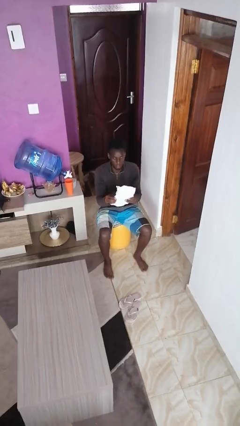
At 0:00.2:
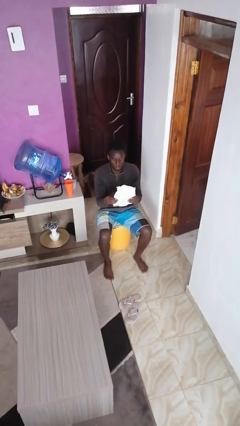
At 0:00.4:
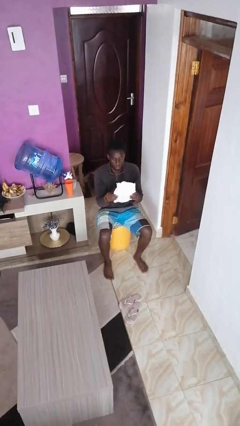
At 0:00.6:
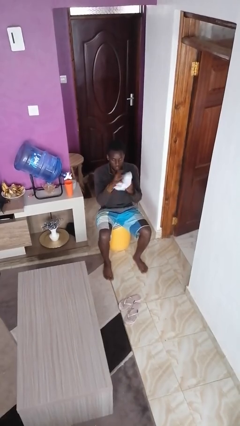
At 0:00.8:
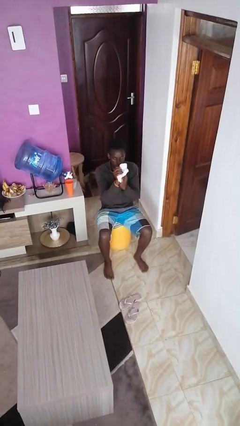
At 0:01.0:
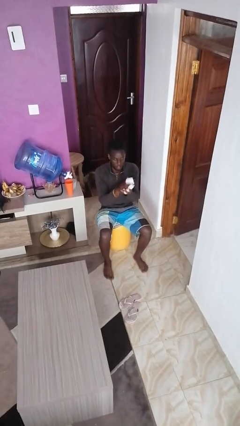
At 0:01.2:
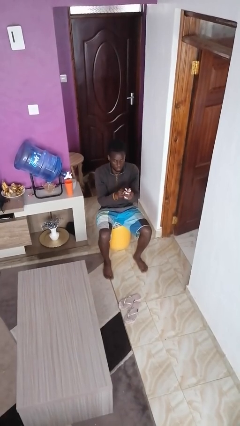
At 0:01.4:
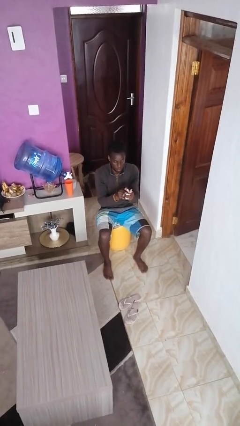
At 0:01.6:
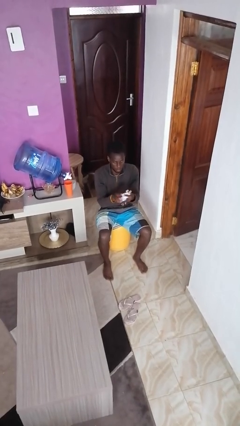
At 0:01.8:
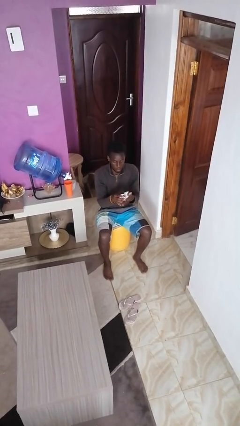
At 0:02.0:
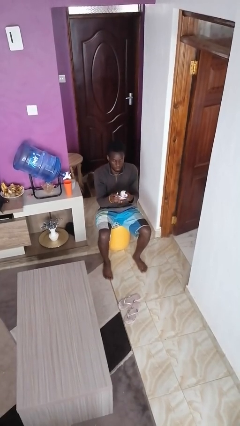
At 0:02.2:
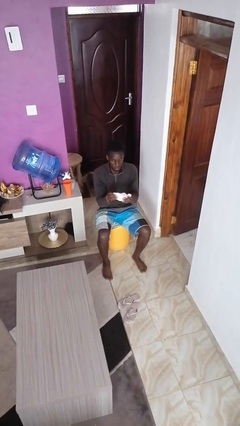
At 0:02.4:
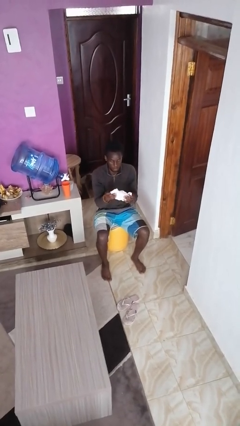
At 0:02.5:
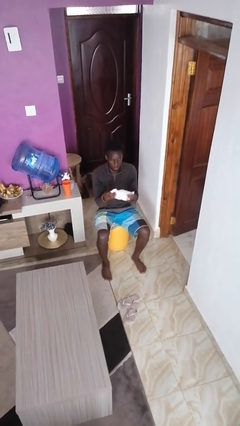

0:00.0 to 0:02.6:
person crumples paper

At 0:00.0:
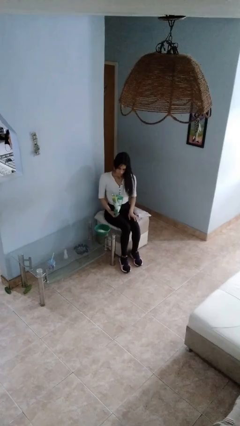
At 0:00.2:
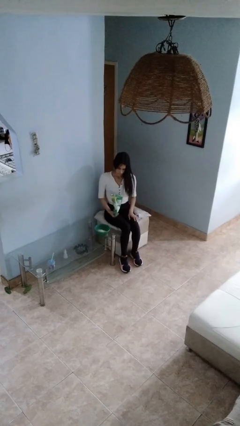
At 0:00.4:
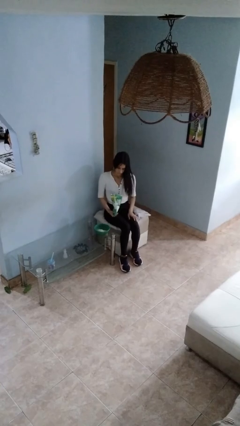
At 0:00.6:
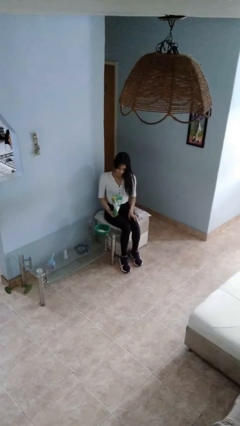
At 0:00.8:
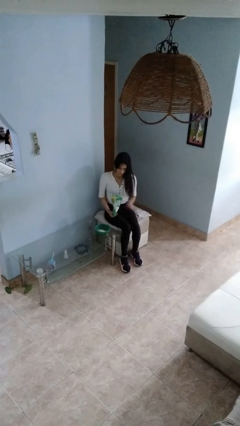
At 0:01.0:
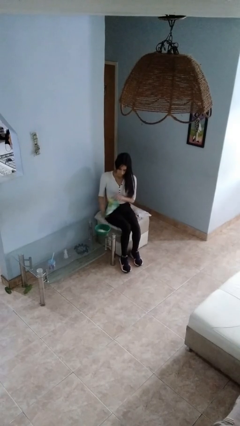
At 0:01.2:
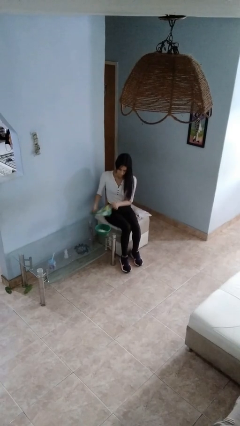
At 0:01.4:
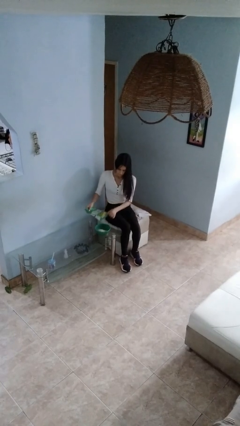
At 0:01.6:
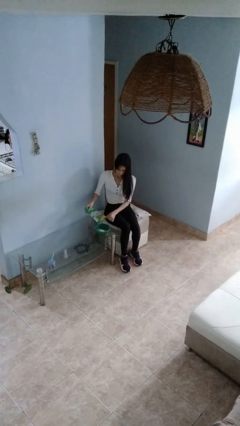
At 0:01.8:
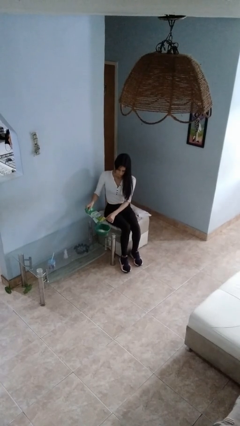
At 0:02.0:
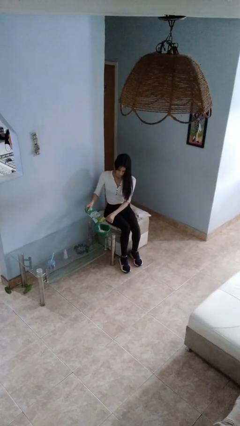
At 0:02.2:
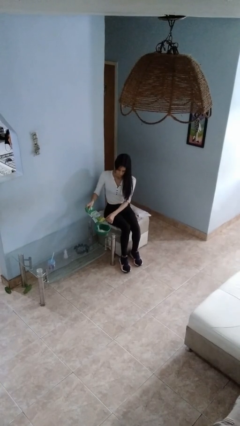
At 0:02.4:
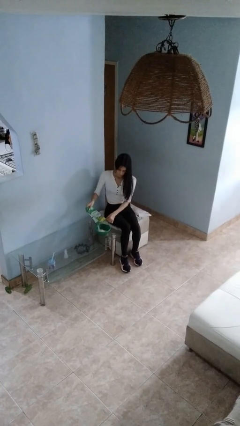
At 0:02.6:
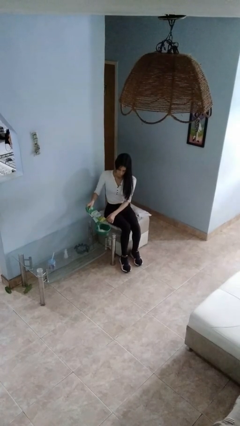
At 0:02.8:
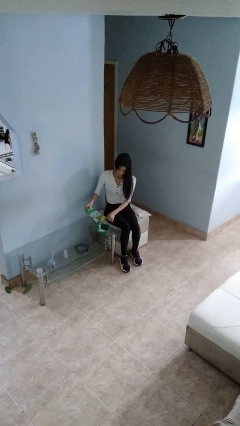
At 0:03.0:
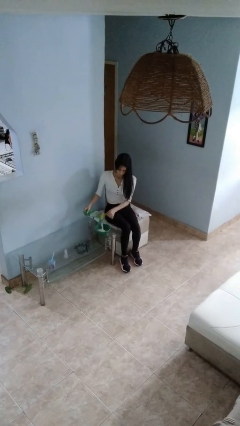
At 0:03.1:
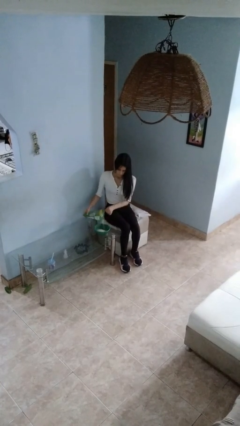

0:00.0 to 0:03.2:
person pours into bowl

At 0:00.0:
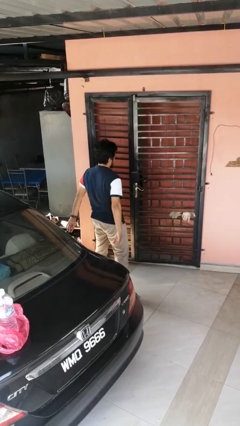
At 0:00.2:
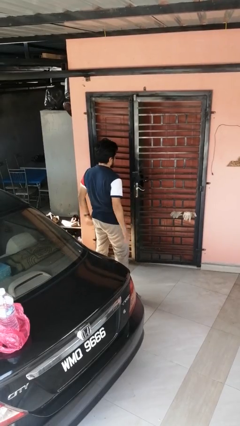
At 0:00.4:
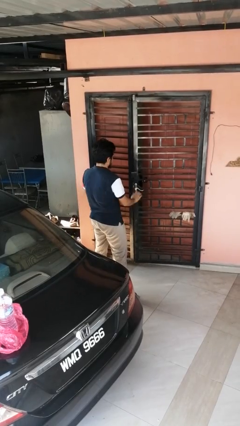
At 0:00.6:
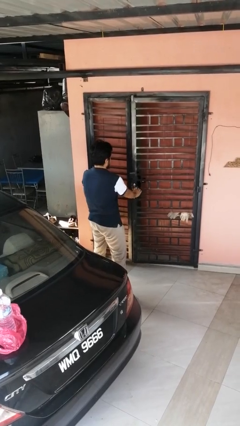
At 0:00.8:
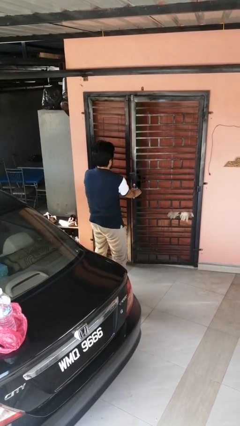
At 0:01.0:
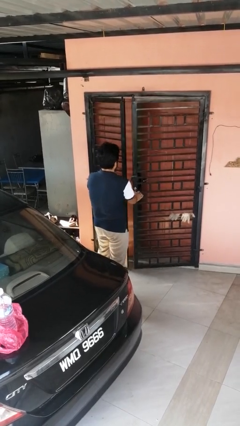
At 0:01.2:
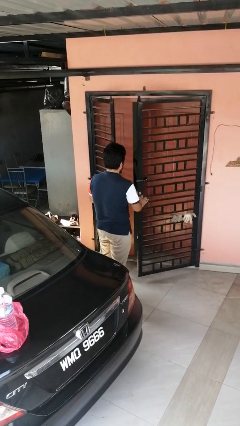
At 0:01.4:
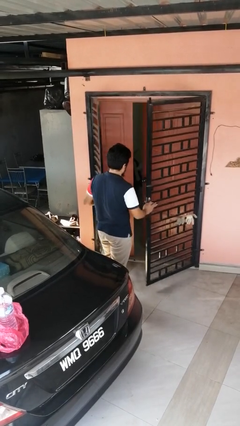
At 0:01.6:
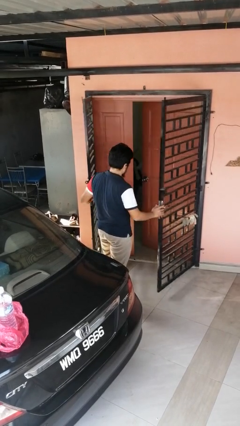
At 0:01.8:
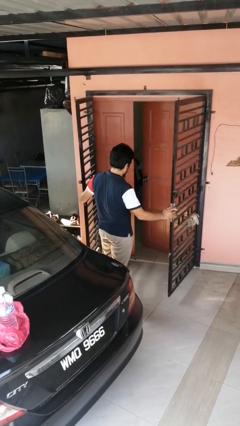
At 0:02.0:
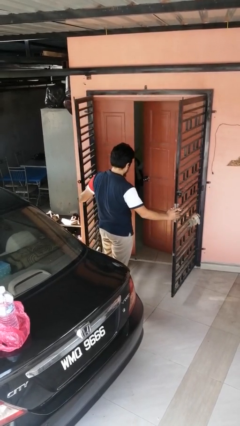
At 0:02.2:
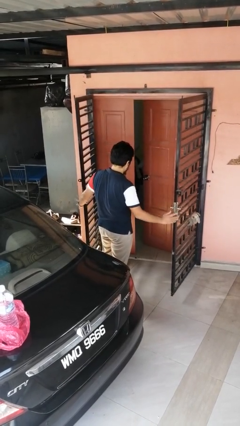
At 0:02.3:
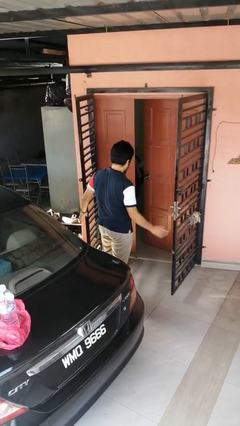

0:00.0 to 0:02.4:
person opens gate

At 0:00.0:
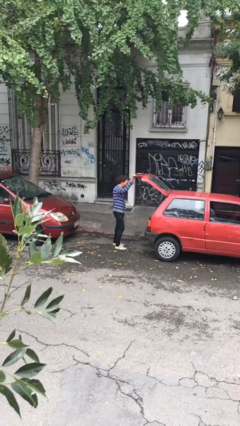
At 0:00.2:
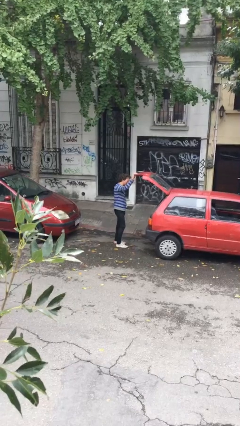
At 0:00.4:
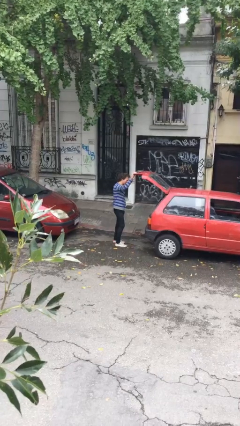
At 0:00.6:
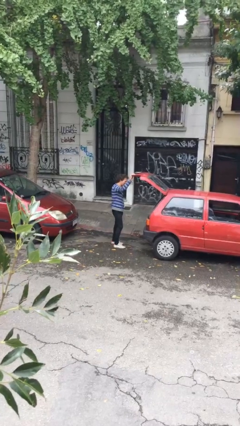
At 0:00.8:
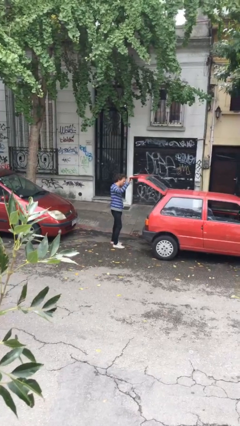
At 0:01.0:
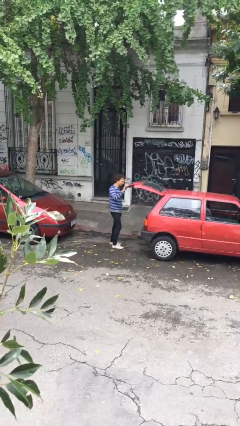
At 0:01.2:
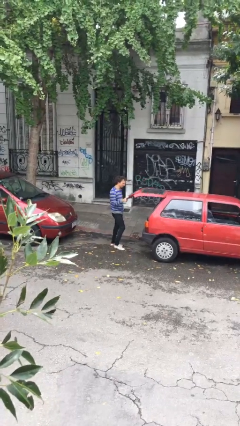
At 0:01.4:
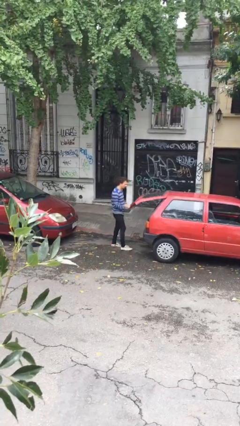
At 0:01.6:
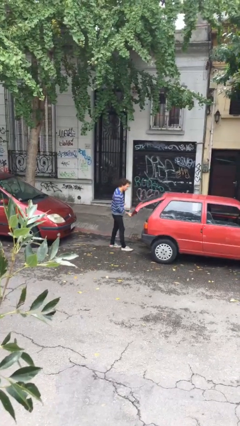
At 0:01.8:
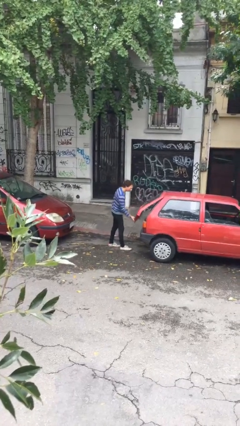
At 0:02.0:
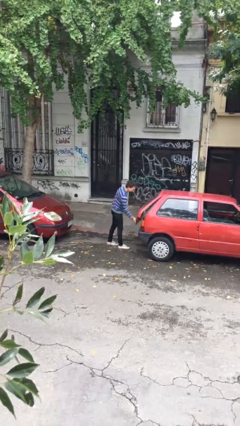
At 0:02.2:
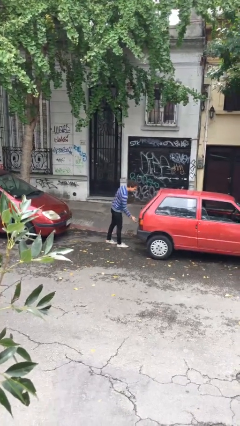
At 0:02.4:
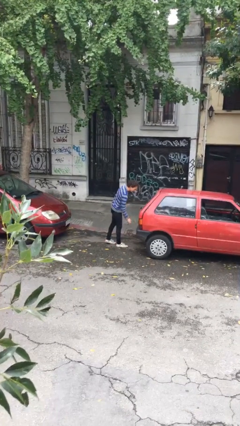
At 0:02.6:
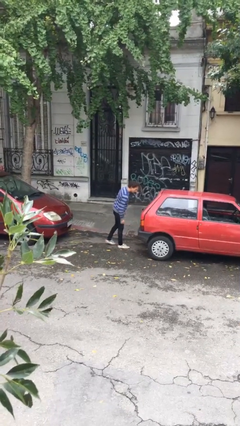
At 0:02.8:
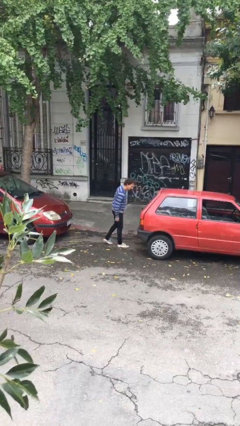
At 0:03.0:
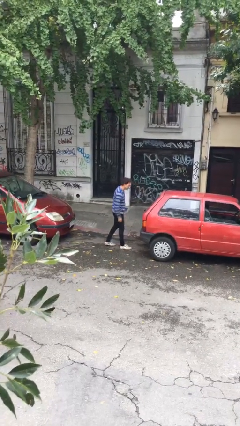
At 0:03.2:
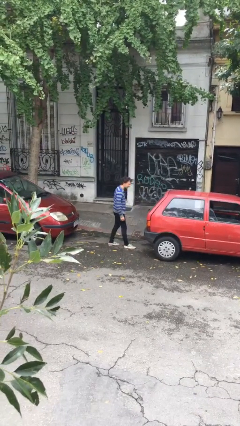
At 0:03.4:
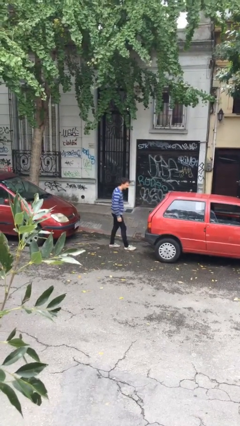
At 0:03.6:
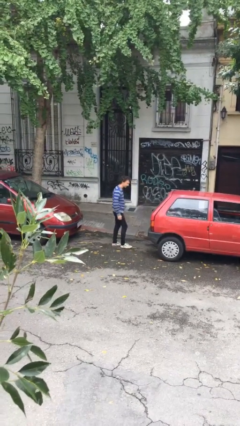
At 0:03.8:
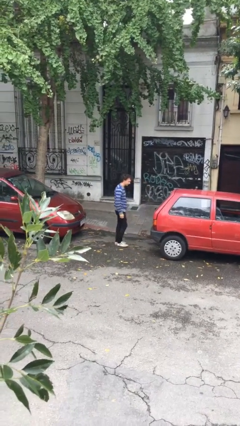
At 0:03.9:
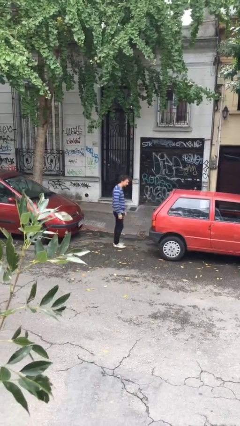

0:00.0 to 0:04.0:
person closes car trunk

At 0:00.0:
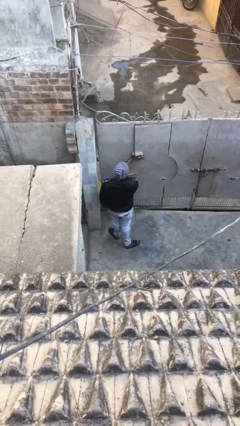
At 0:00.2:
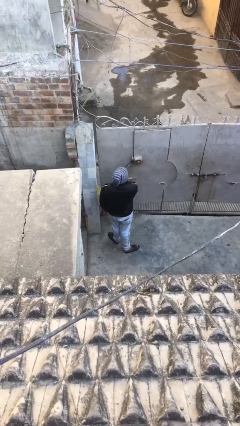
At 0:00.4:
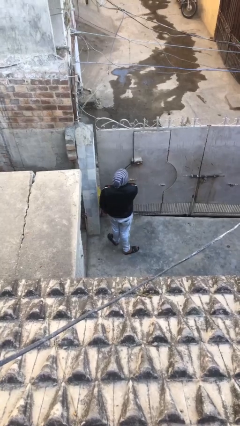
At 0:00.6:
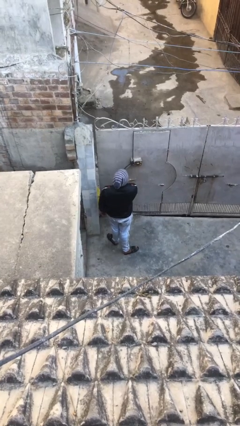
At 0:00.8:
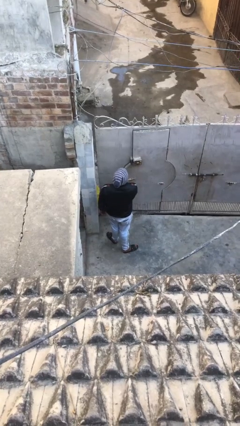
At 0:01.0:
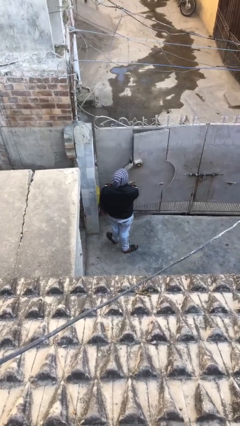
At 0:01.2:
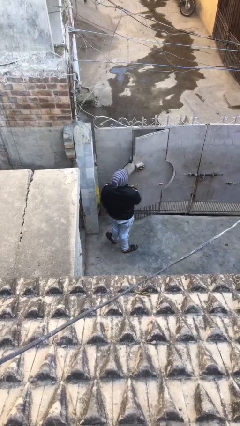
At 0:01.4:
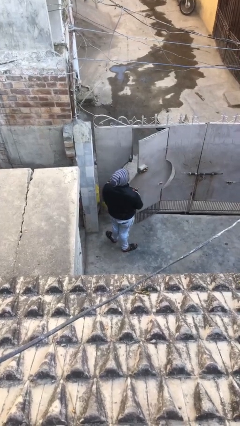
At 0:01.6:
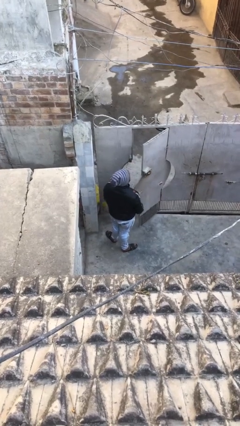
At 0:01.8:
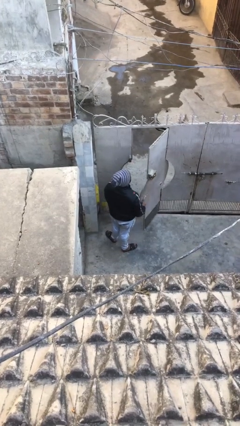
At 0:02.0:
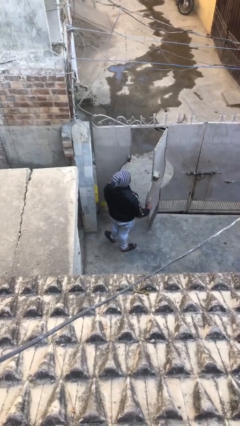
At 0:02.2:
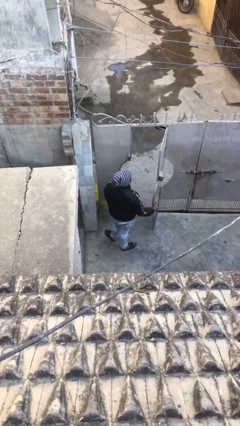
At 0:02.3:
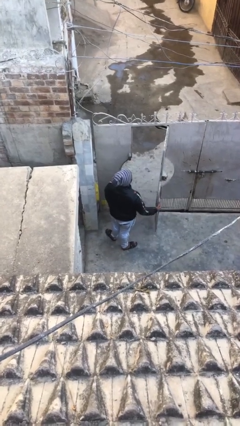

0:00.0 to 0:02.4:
person opens facility door

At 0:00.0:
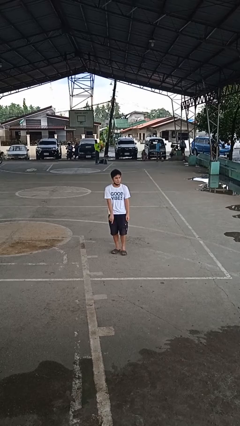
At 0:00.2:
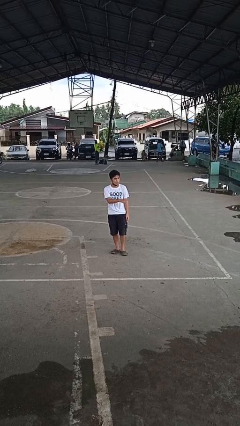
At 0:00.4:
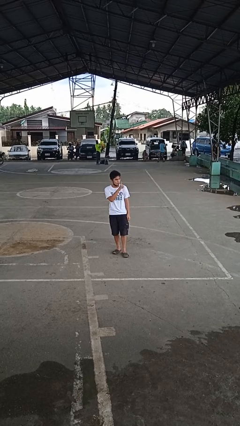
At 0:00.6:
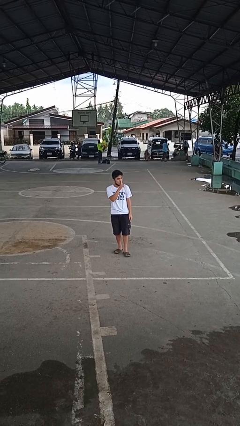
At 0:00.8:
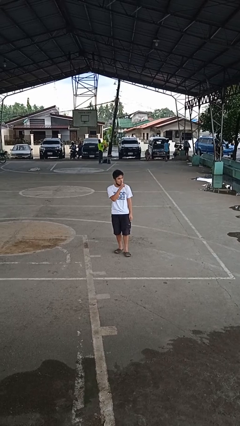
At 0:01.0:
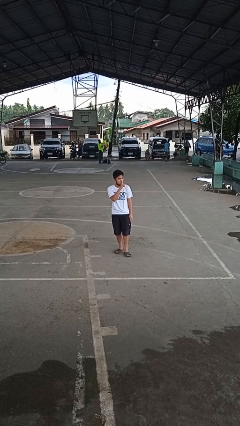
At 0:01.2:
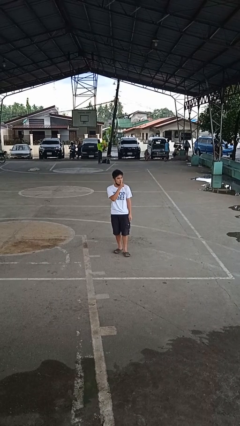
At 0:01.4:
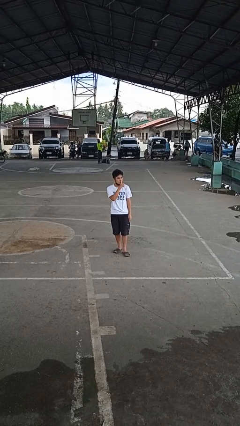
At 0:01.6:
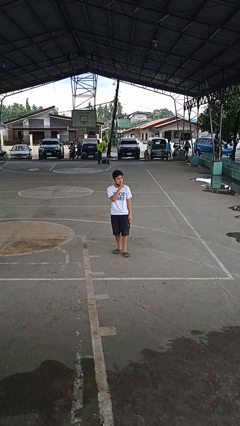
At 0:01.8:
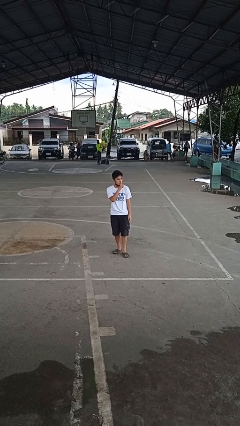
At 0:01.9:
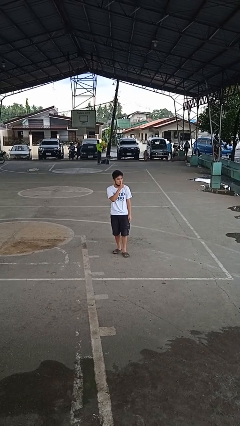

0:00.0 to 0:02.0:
person gestures be quiet

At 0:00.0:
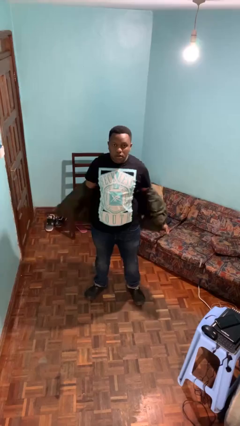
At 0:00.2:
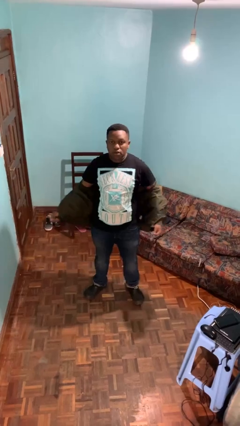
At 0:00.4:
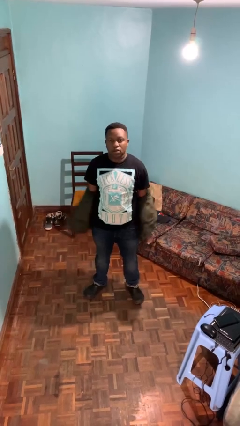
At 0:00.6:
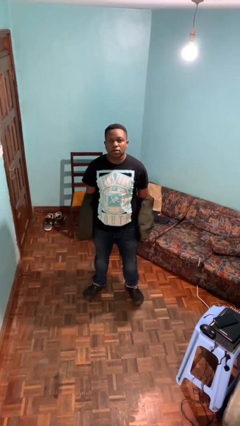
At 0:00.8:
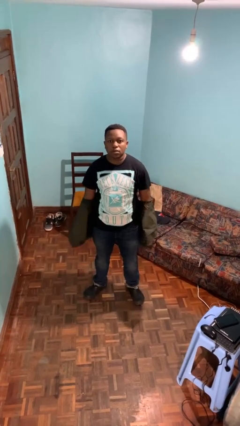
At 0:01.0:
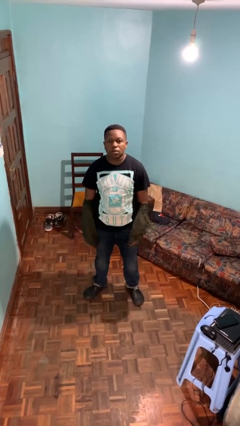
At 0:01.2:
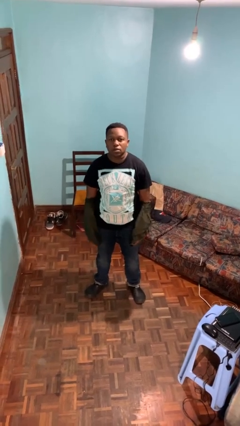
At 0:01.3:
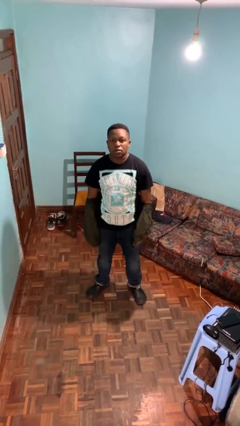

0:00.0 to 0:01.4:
person takes off jacket
